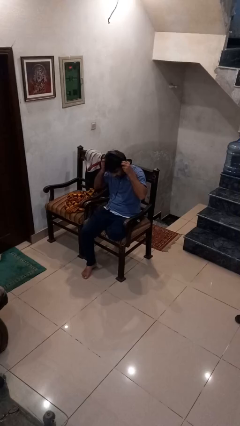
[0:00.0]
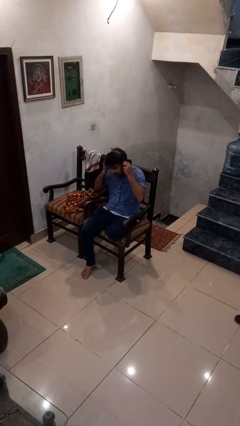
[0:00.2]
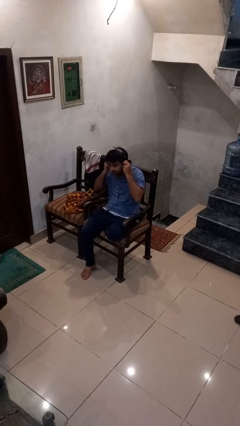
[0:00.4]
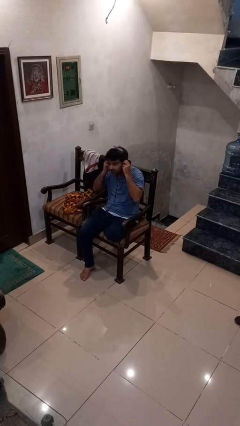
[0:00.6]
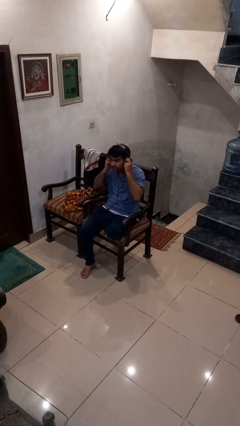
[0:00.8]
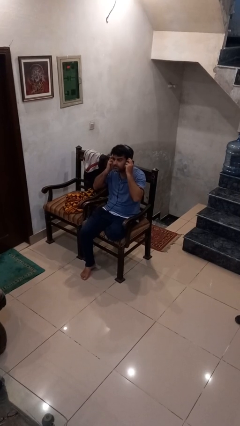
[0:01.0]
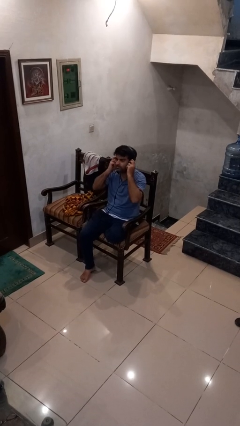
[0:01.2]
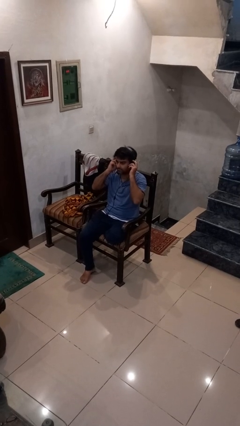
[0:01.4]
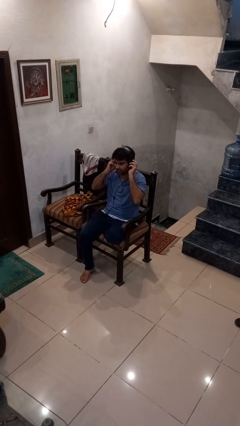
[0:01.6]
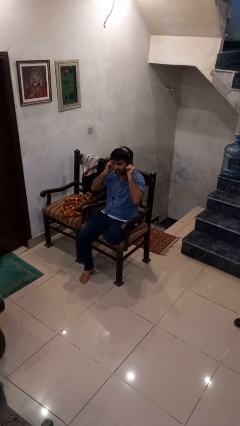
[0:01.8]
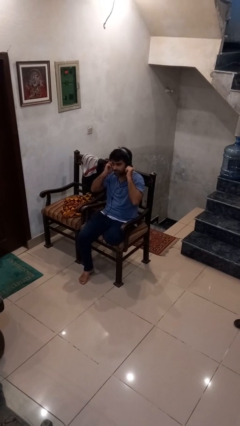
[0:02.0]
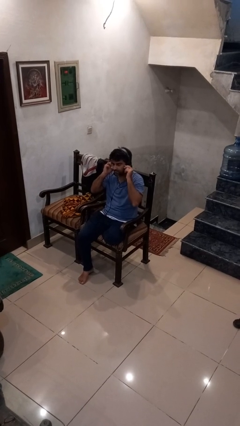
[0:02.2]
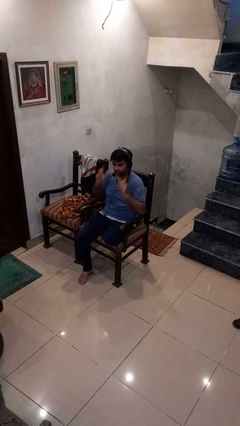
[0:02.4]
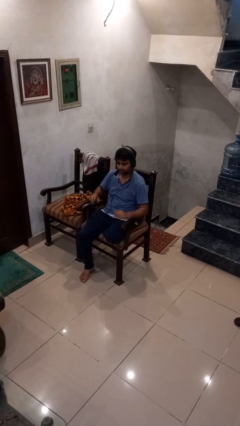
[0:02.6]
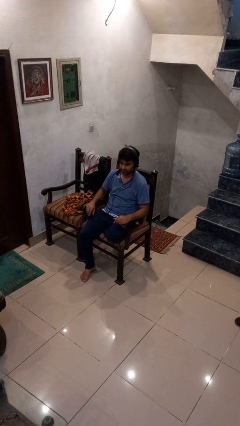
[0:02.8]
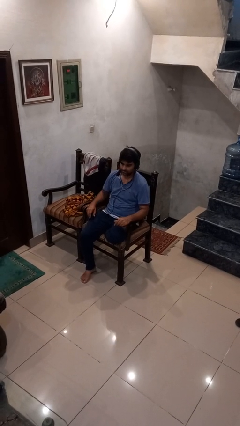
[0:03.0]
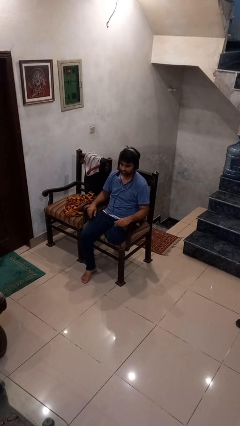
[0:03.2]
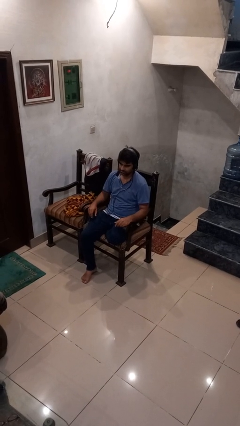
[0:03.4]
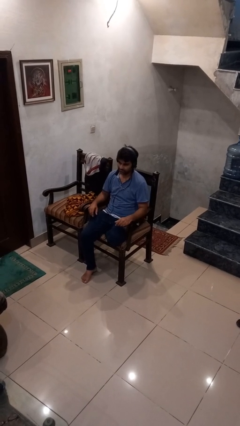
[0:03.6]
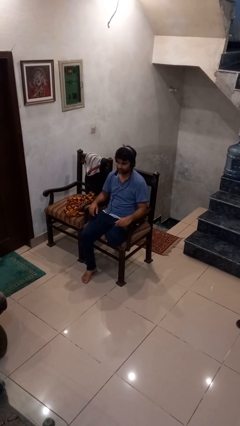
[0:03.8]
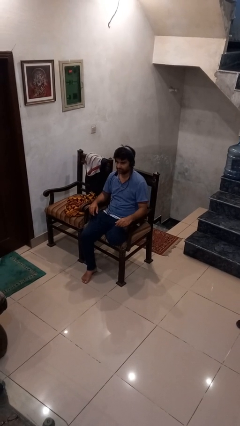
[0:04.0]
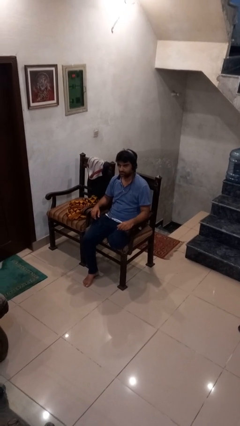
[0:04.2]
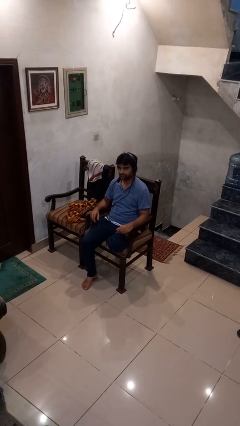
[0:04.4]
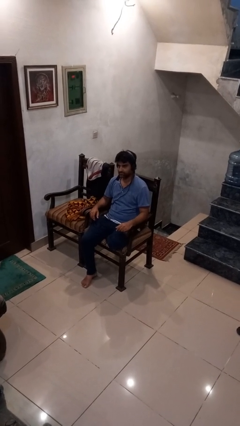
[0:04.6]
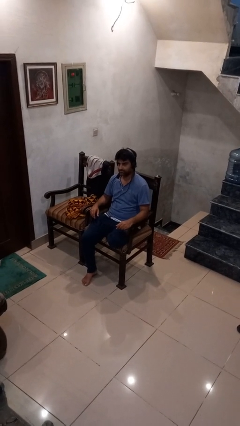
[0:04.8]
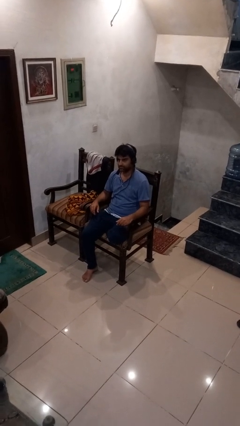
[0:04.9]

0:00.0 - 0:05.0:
person puts on headphones

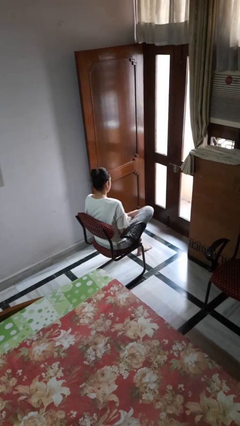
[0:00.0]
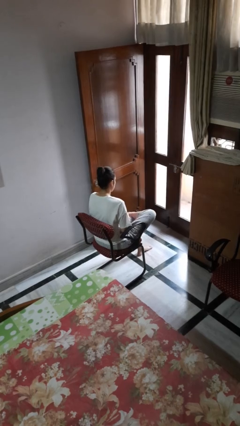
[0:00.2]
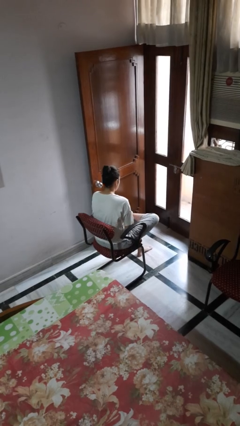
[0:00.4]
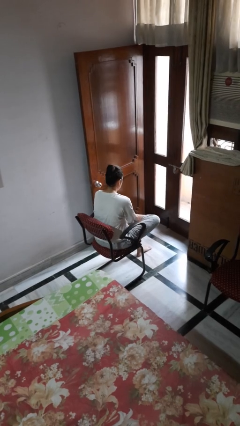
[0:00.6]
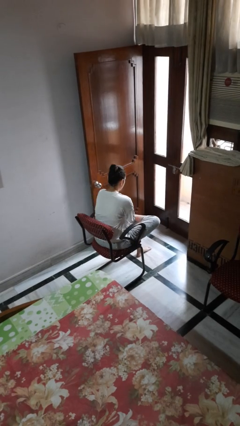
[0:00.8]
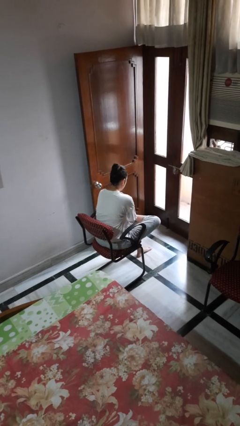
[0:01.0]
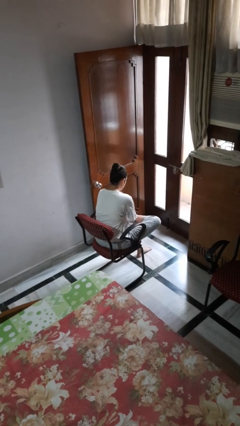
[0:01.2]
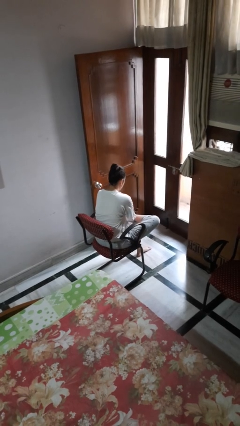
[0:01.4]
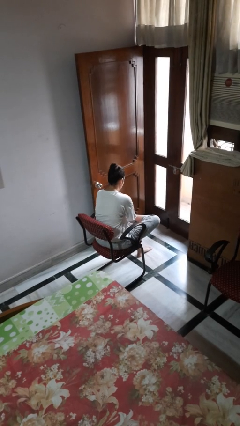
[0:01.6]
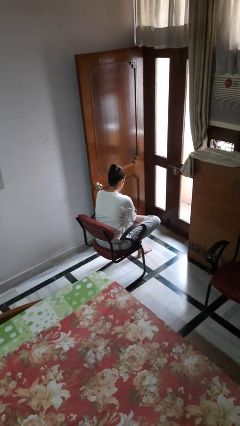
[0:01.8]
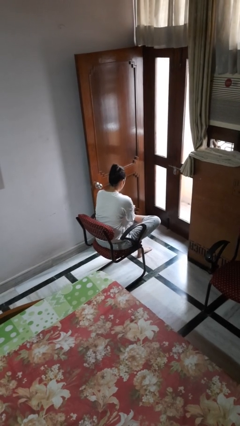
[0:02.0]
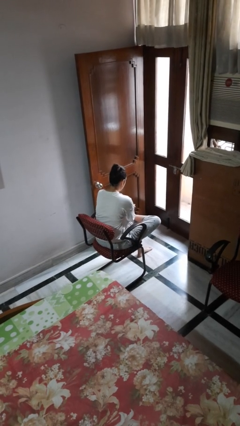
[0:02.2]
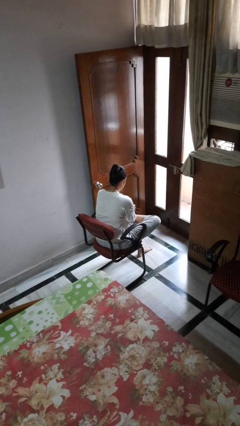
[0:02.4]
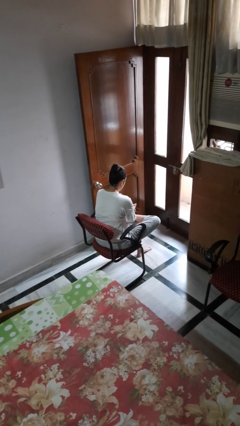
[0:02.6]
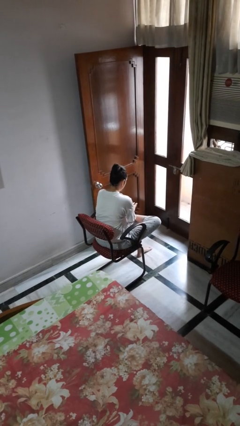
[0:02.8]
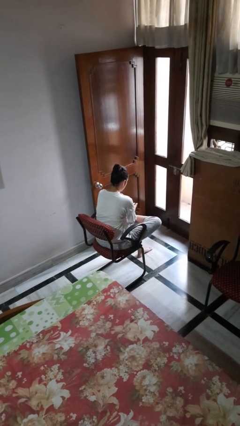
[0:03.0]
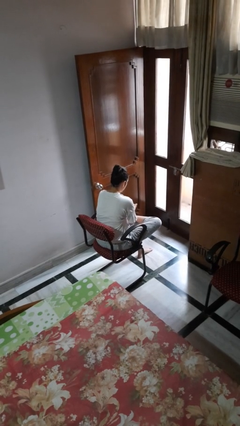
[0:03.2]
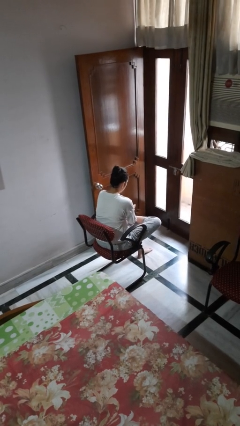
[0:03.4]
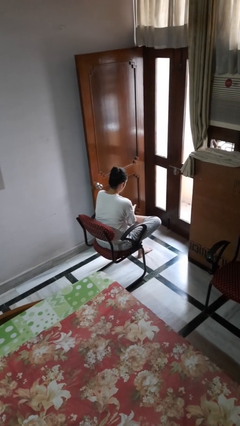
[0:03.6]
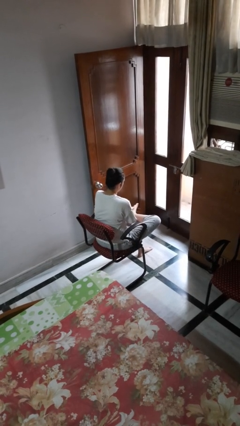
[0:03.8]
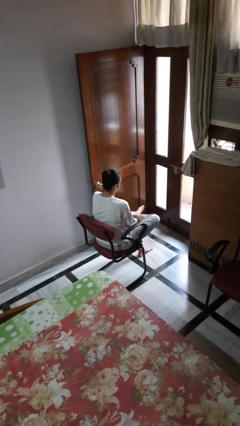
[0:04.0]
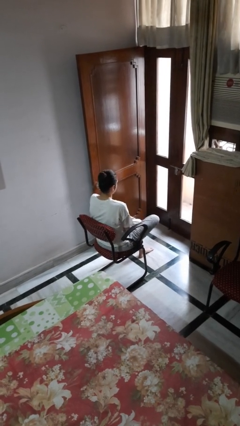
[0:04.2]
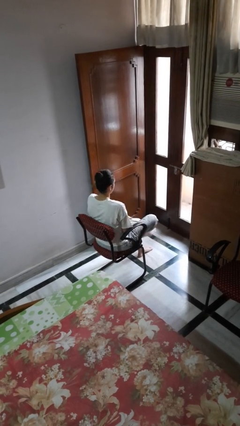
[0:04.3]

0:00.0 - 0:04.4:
person rubs foot

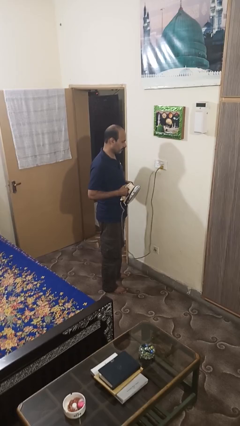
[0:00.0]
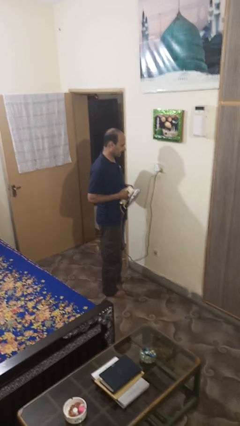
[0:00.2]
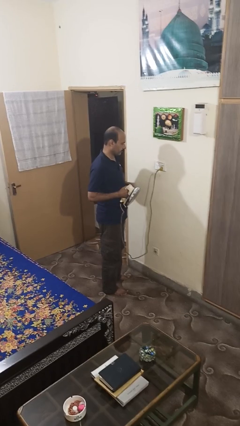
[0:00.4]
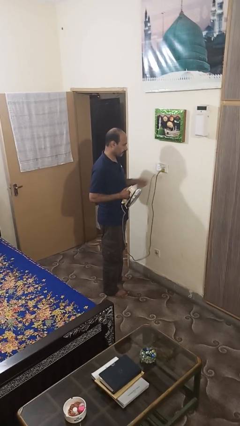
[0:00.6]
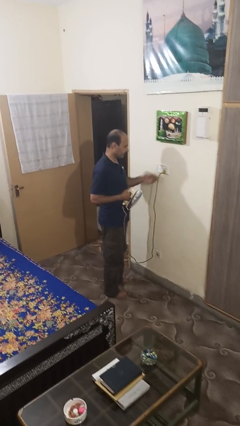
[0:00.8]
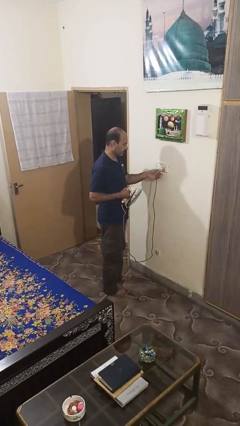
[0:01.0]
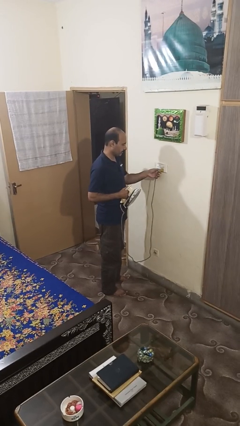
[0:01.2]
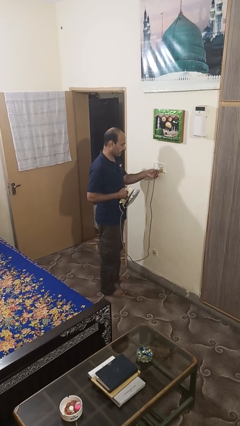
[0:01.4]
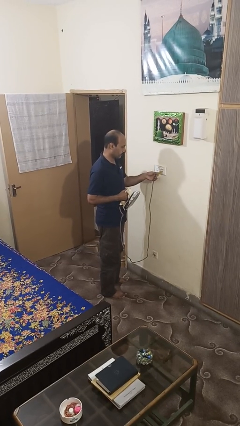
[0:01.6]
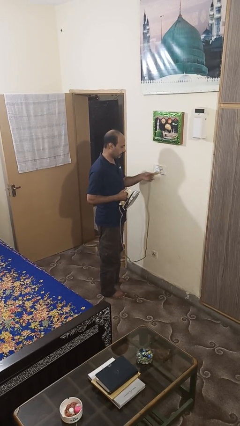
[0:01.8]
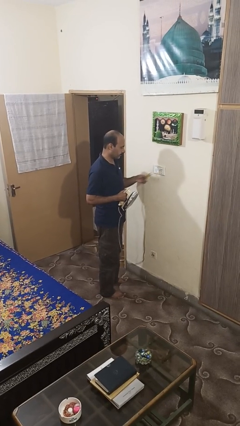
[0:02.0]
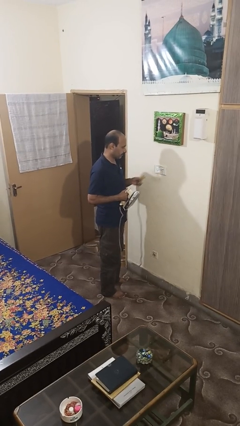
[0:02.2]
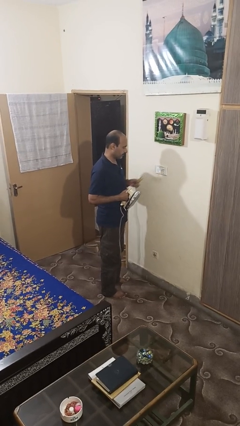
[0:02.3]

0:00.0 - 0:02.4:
person unplugs from electrical socket

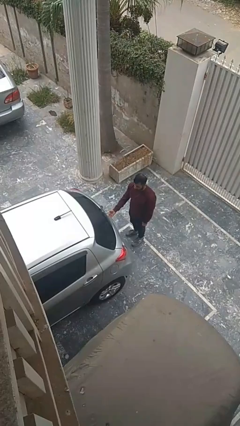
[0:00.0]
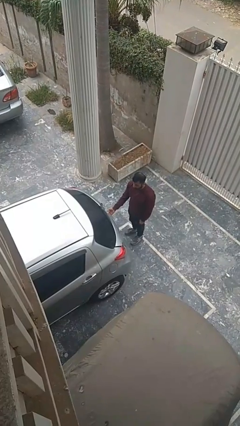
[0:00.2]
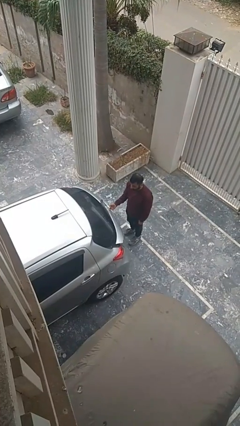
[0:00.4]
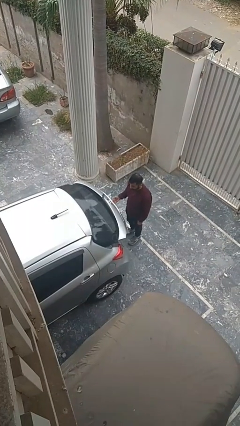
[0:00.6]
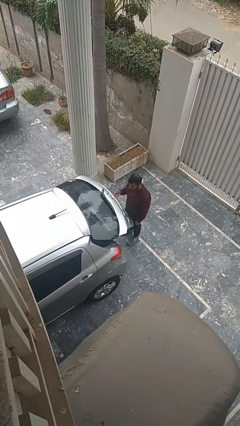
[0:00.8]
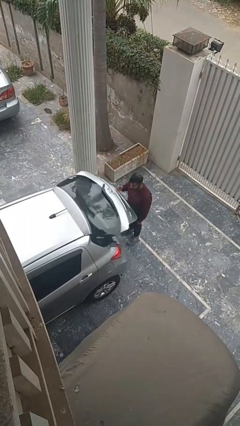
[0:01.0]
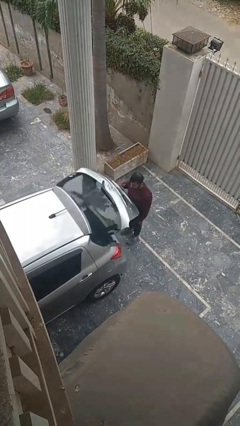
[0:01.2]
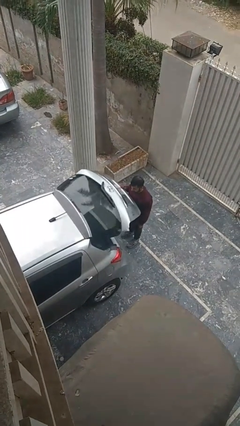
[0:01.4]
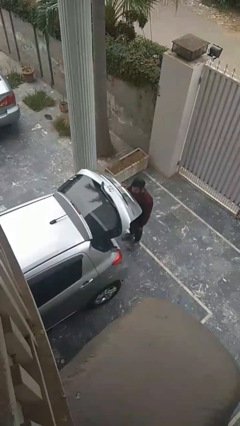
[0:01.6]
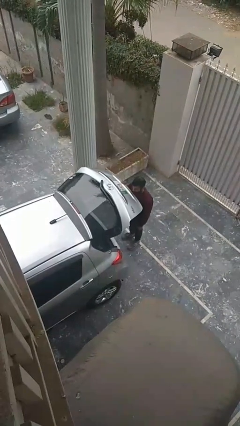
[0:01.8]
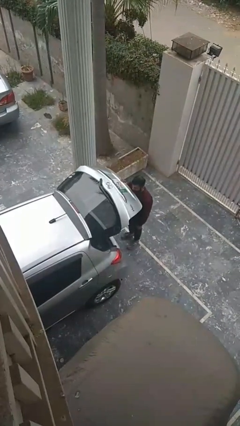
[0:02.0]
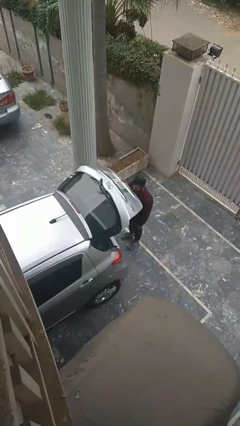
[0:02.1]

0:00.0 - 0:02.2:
person opens car trunk

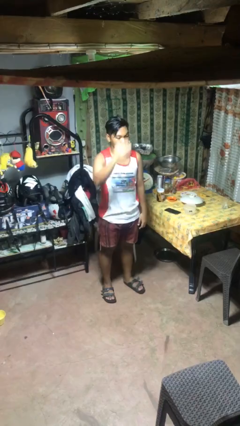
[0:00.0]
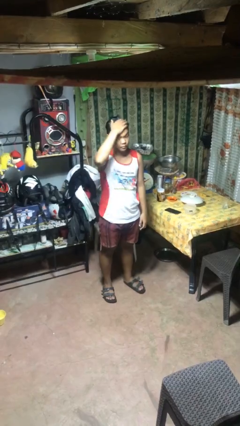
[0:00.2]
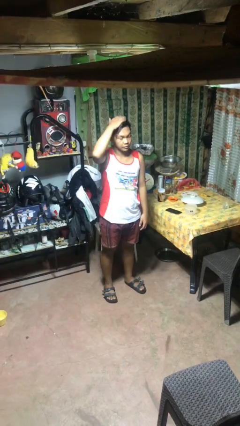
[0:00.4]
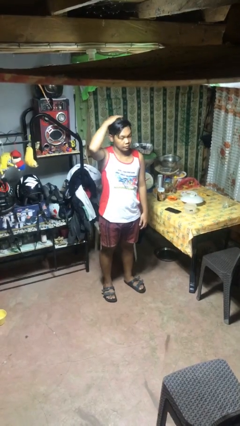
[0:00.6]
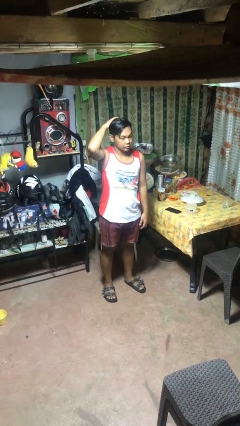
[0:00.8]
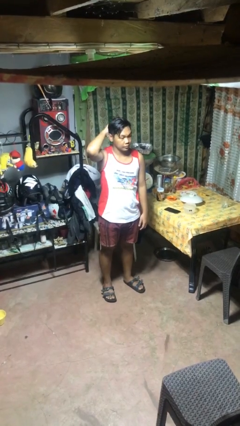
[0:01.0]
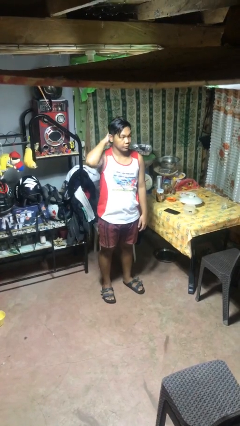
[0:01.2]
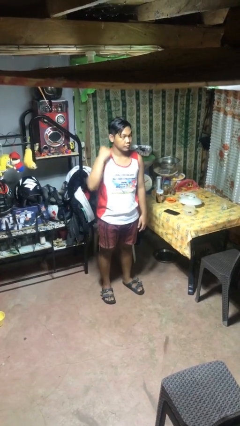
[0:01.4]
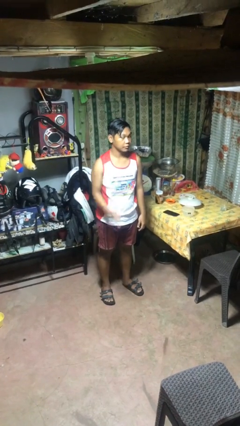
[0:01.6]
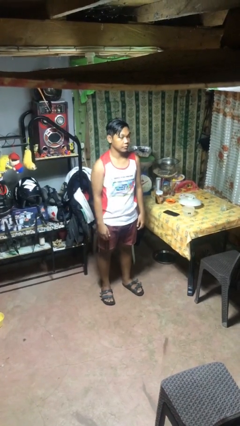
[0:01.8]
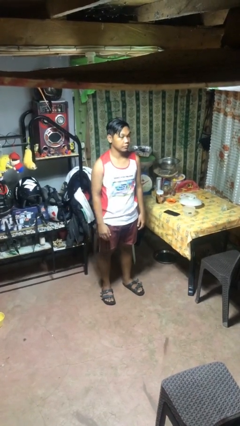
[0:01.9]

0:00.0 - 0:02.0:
person pats head

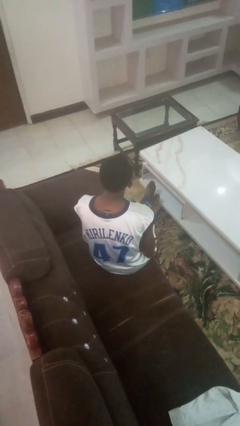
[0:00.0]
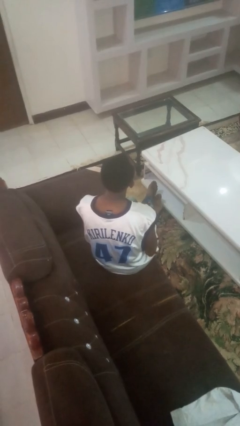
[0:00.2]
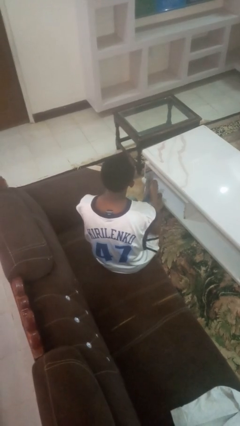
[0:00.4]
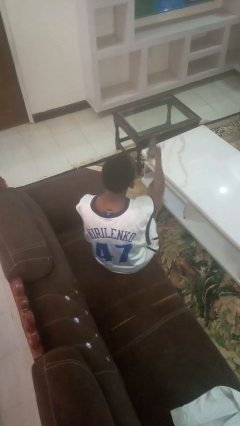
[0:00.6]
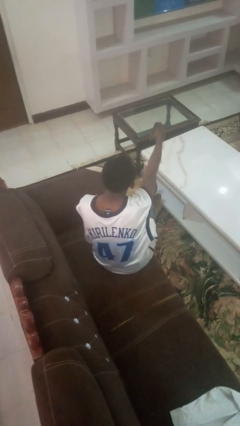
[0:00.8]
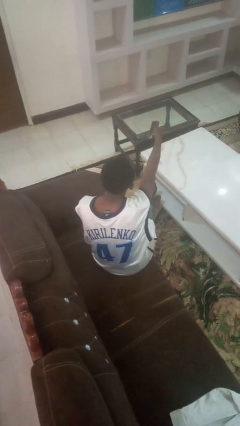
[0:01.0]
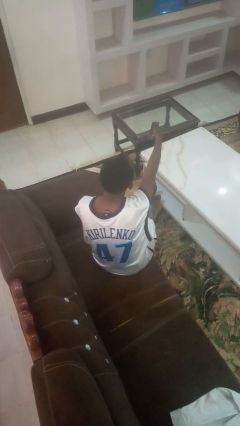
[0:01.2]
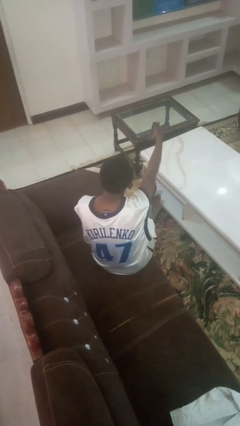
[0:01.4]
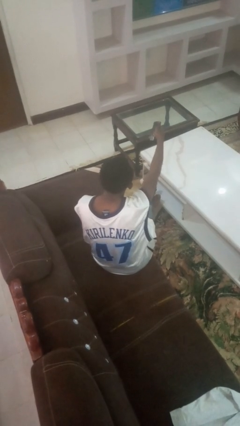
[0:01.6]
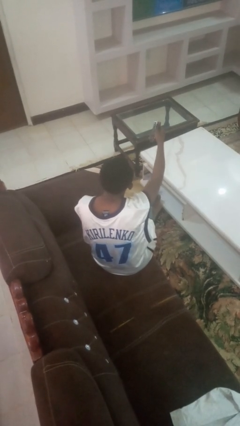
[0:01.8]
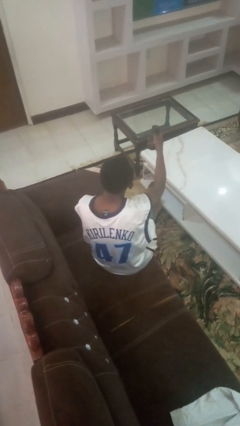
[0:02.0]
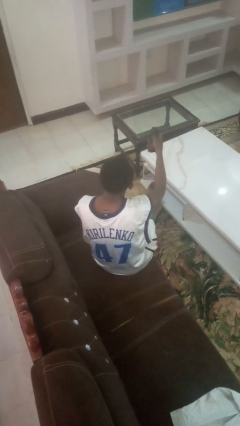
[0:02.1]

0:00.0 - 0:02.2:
person uses television remote
